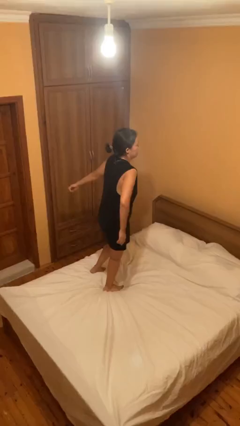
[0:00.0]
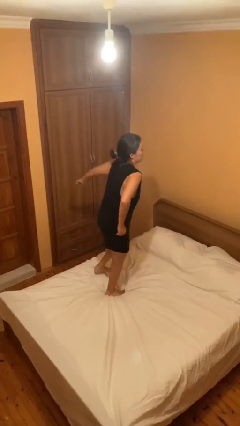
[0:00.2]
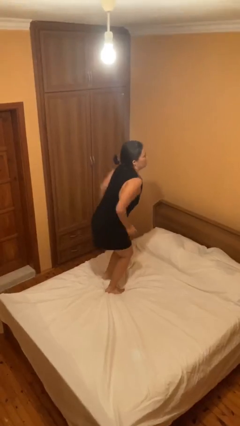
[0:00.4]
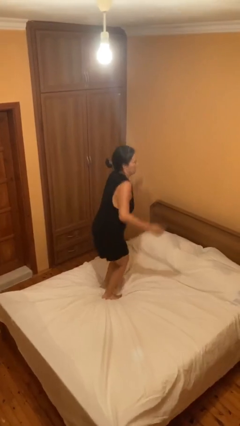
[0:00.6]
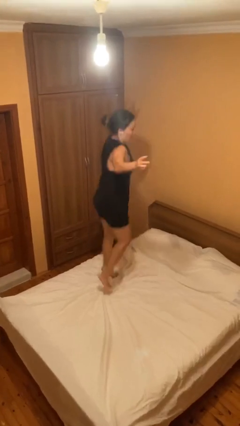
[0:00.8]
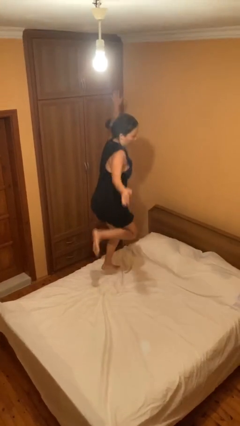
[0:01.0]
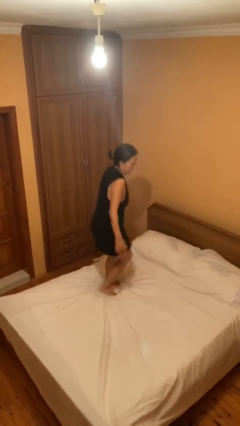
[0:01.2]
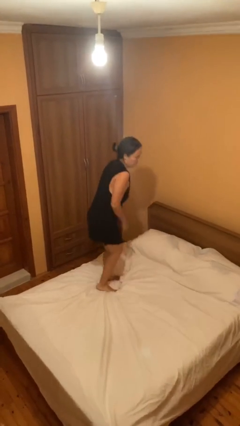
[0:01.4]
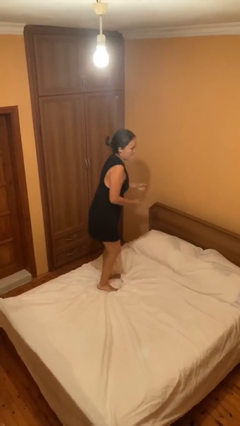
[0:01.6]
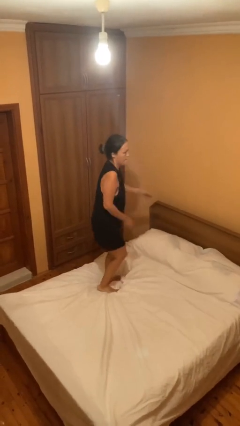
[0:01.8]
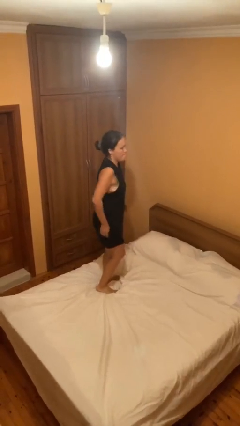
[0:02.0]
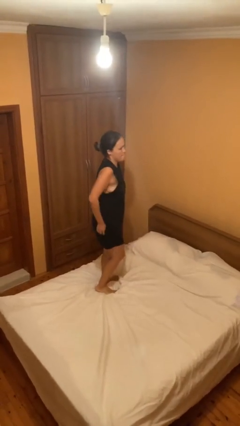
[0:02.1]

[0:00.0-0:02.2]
person jumps on bed

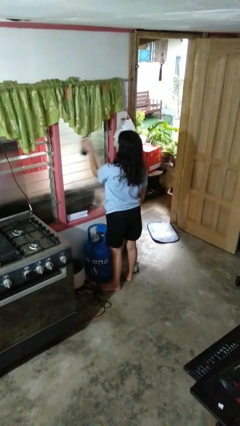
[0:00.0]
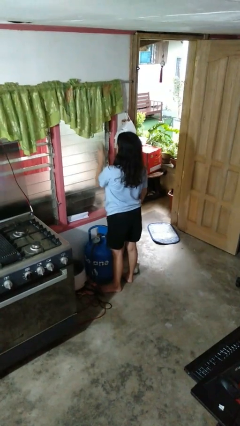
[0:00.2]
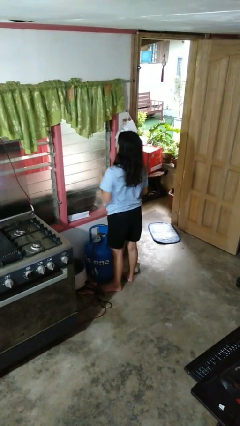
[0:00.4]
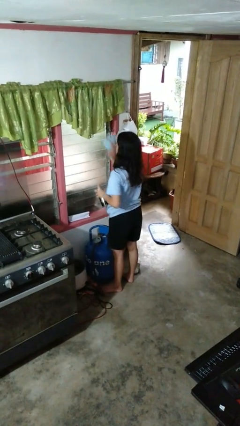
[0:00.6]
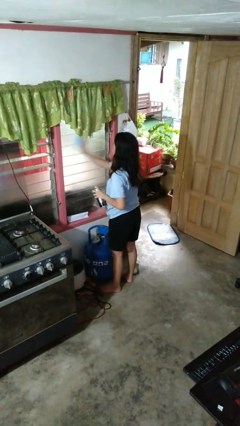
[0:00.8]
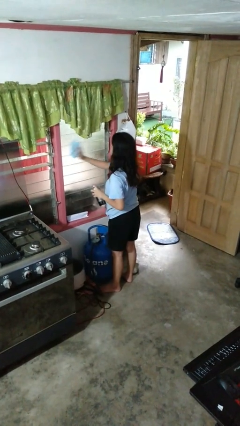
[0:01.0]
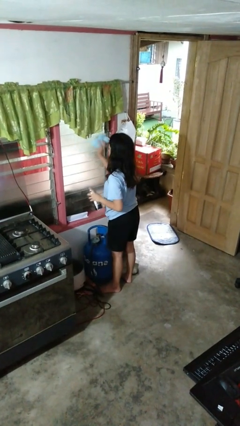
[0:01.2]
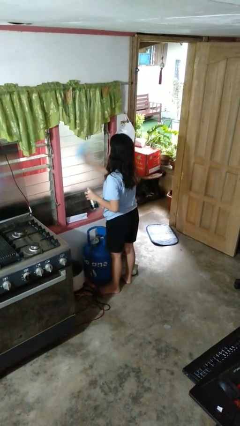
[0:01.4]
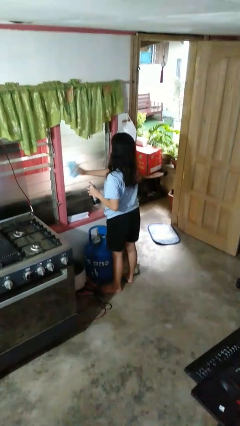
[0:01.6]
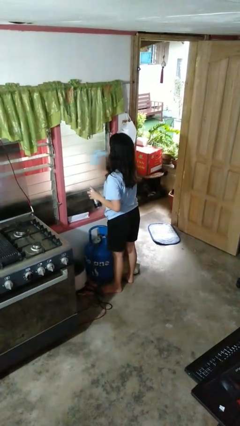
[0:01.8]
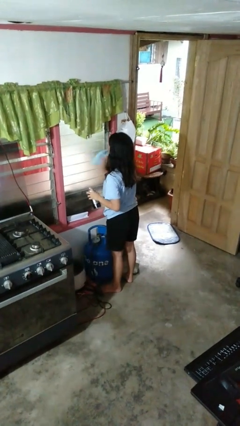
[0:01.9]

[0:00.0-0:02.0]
person washes window

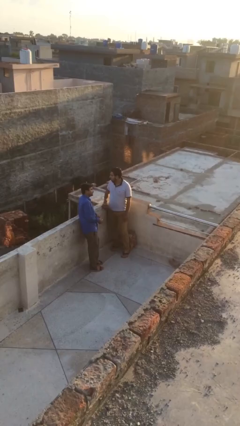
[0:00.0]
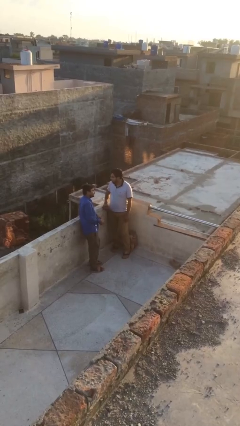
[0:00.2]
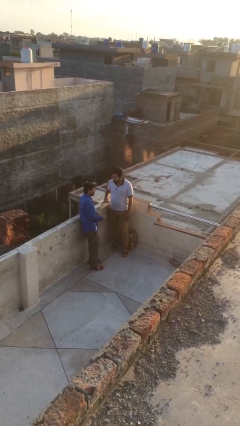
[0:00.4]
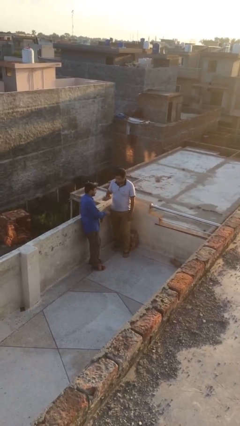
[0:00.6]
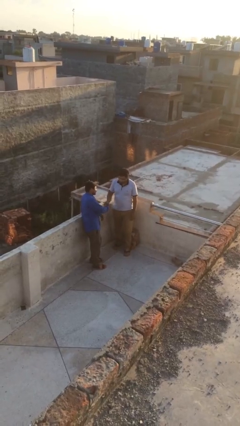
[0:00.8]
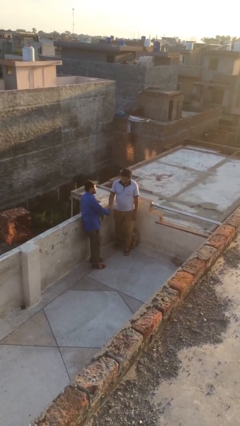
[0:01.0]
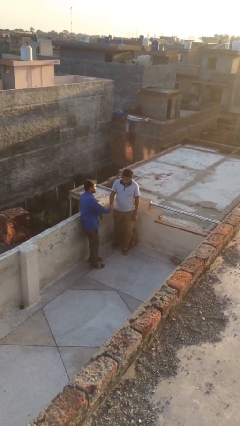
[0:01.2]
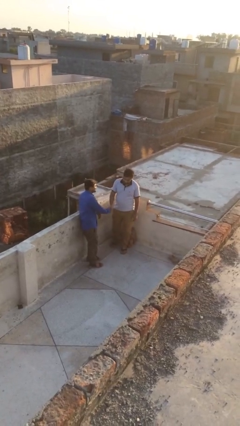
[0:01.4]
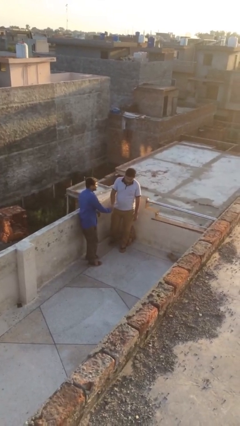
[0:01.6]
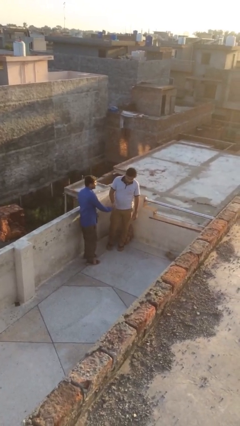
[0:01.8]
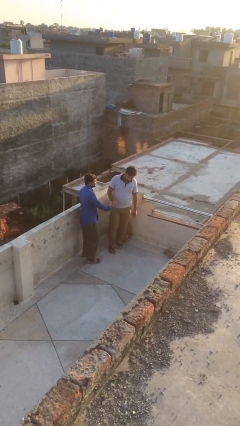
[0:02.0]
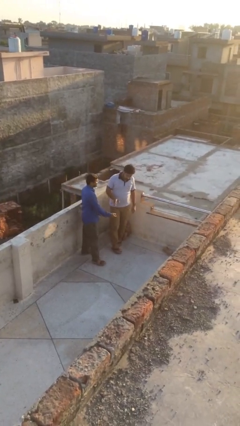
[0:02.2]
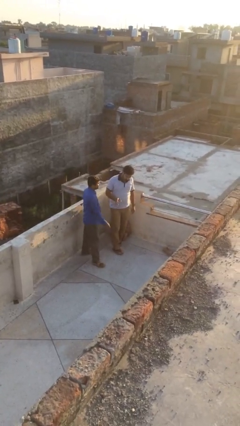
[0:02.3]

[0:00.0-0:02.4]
person shakes hand

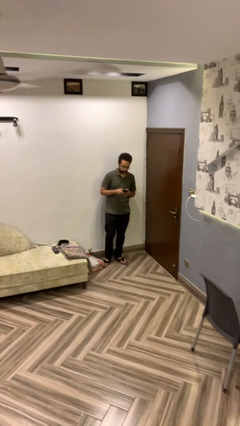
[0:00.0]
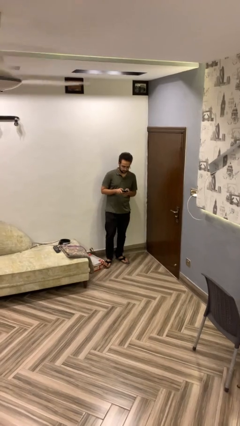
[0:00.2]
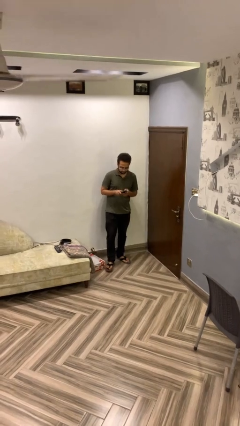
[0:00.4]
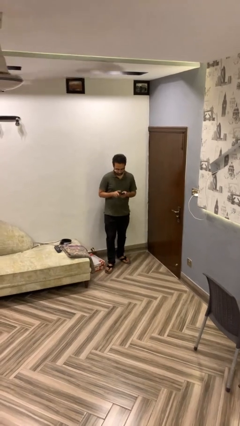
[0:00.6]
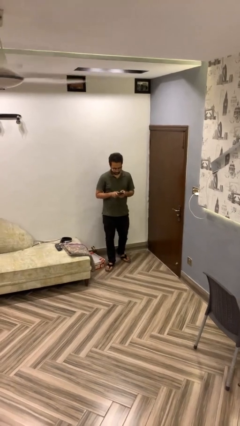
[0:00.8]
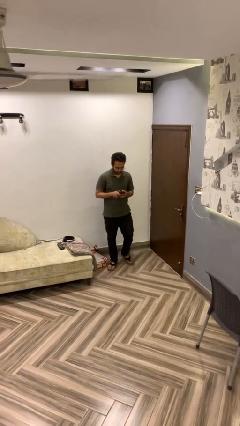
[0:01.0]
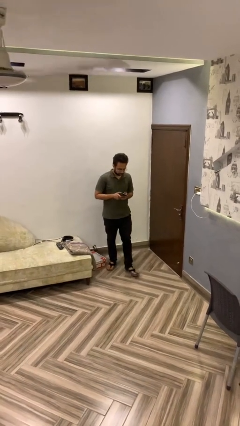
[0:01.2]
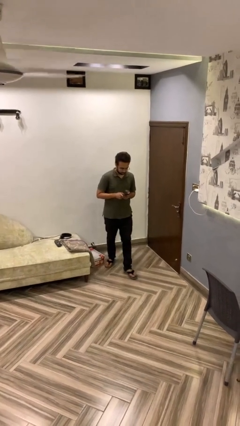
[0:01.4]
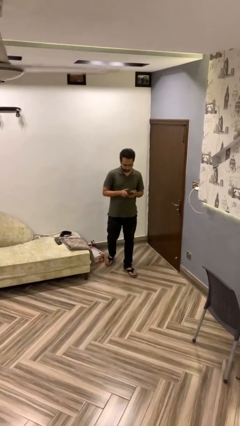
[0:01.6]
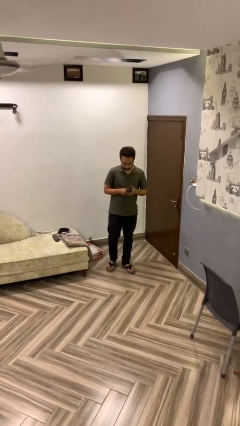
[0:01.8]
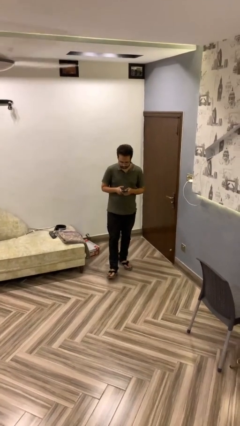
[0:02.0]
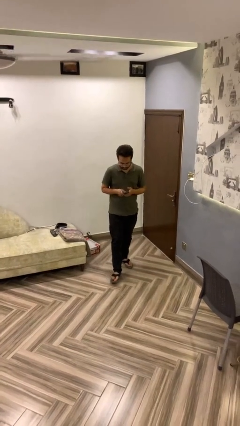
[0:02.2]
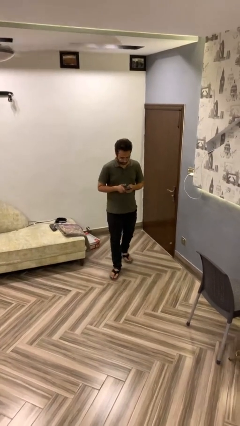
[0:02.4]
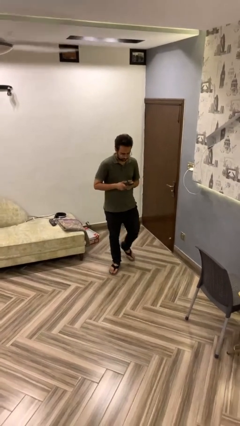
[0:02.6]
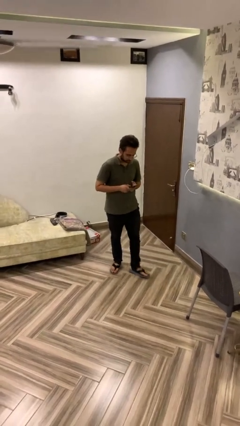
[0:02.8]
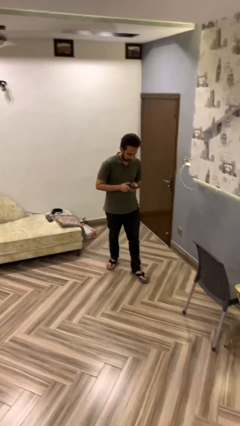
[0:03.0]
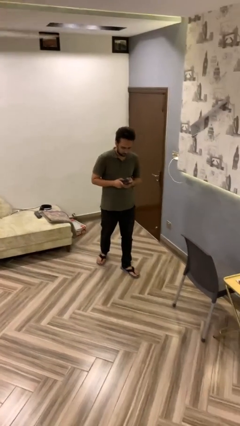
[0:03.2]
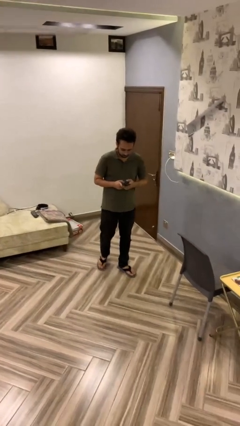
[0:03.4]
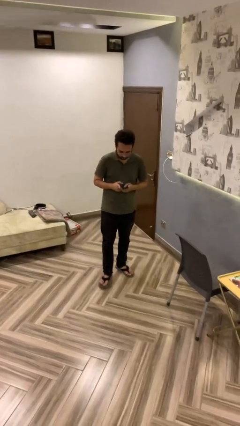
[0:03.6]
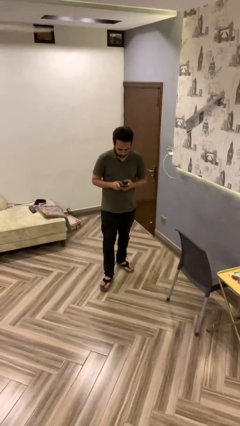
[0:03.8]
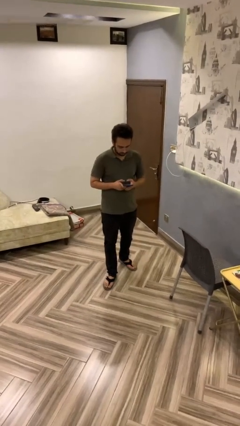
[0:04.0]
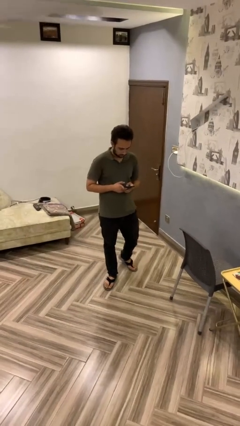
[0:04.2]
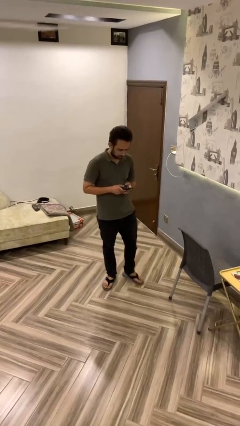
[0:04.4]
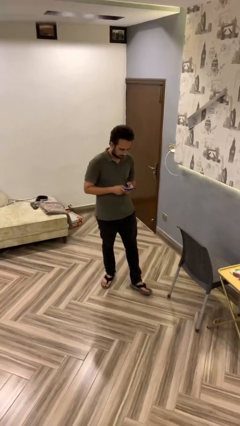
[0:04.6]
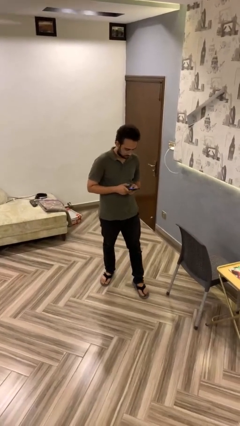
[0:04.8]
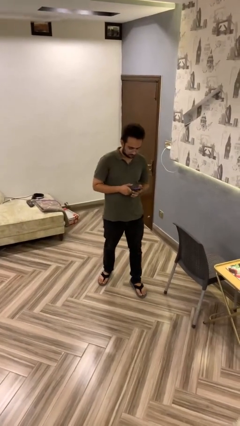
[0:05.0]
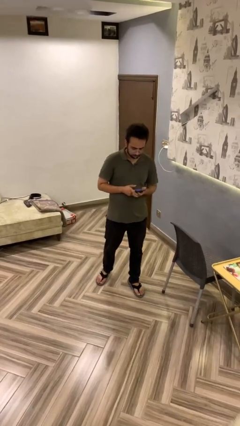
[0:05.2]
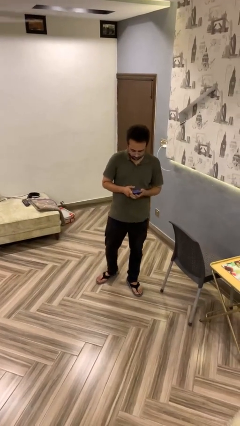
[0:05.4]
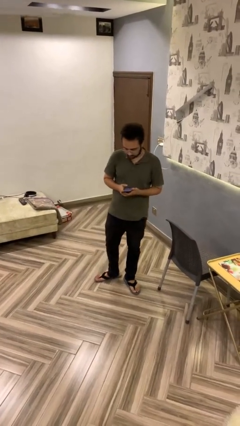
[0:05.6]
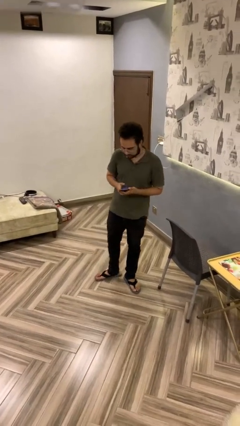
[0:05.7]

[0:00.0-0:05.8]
person texts on phone

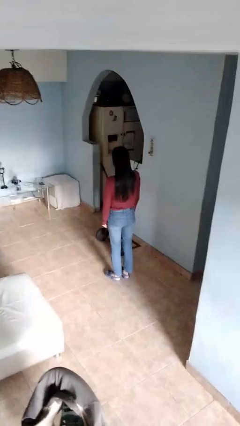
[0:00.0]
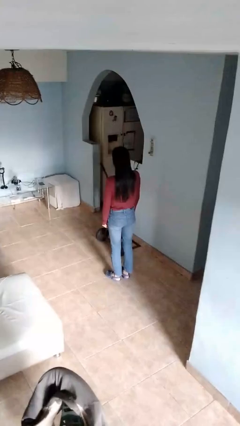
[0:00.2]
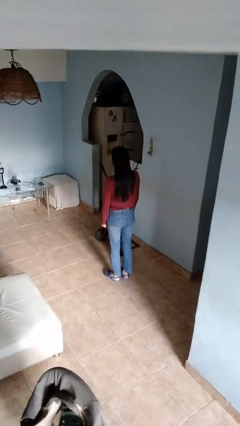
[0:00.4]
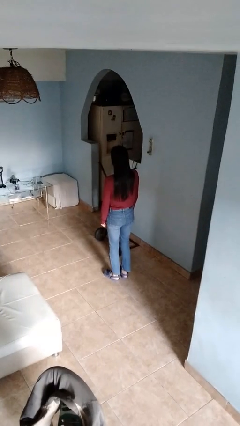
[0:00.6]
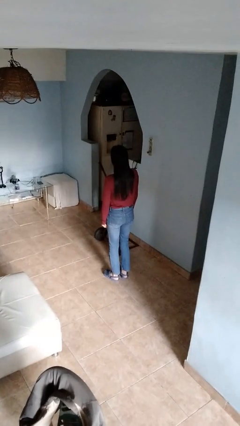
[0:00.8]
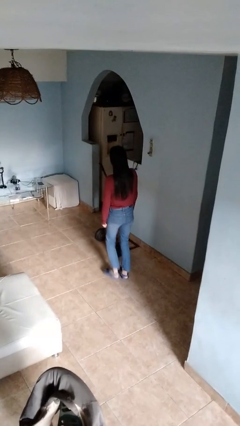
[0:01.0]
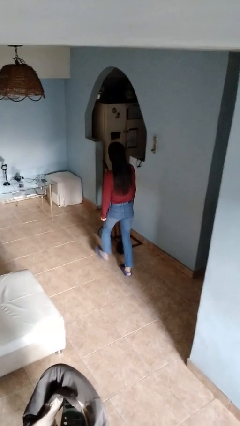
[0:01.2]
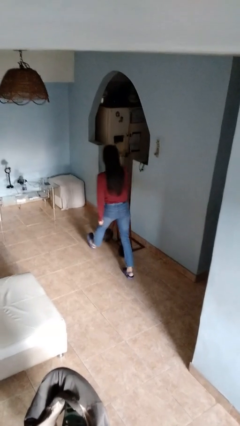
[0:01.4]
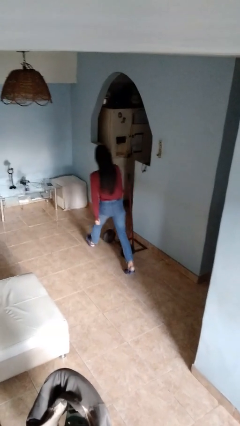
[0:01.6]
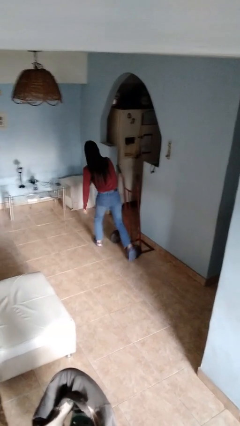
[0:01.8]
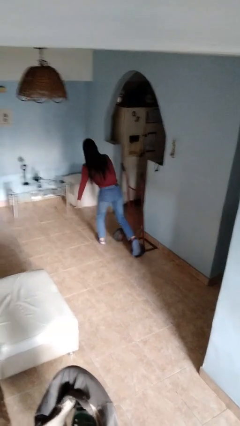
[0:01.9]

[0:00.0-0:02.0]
person trips on object on floor

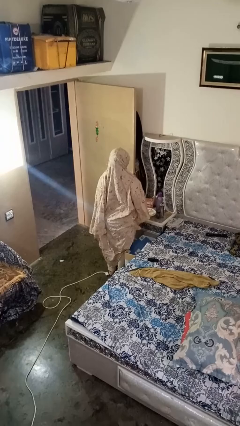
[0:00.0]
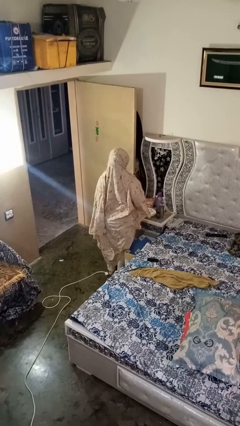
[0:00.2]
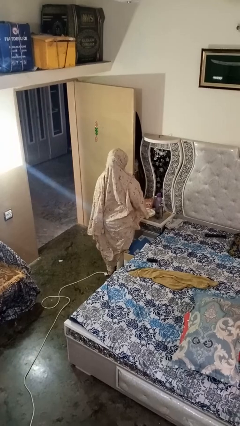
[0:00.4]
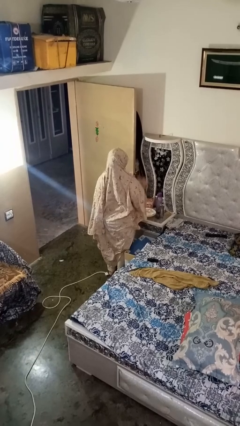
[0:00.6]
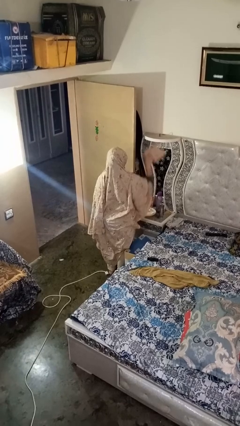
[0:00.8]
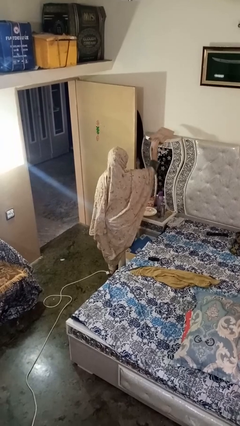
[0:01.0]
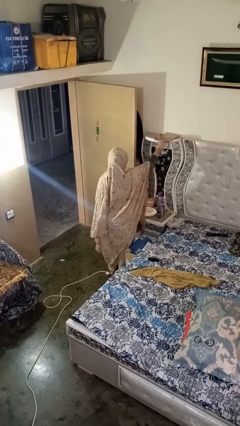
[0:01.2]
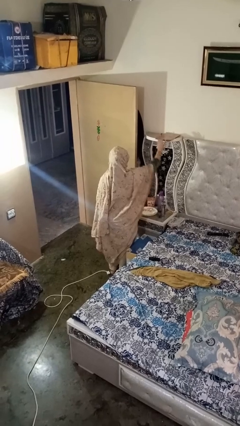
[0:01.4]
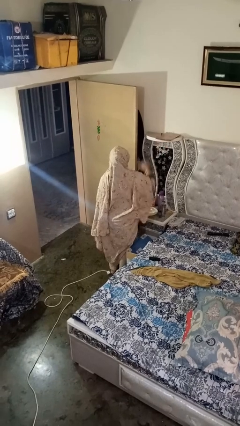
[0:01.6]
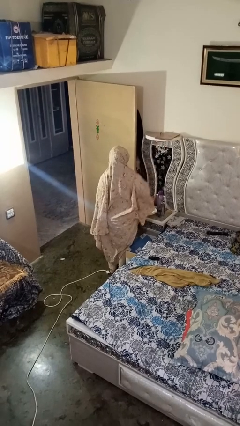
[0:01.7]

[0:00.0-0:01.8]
person puts down object on shelf

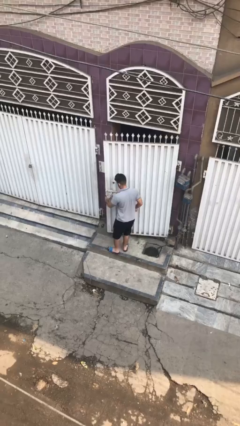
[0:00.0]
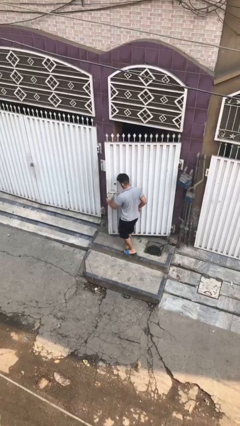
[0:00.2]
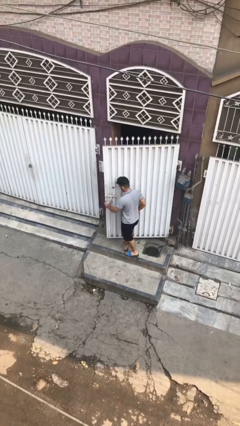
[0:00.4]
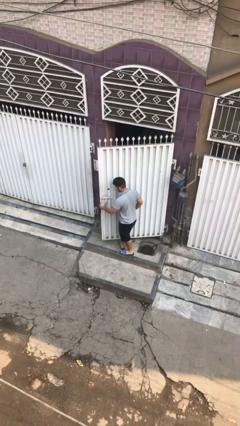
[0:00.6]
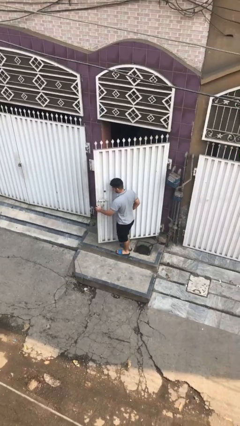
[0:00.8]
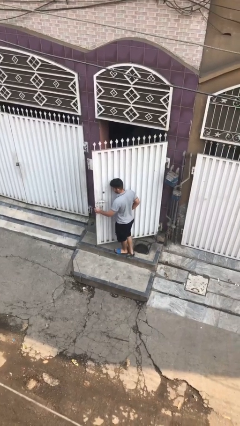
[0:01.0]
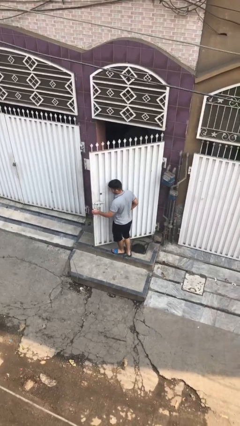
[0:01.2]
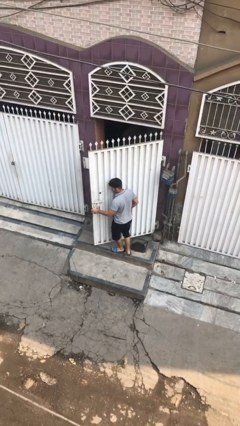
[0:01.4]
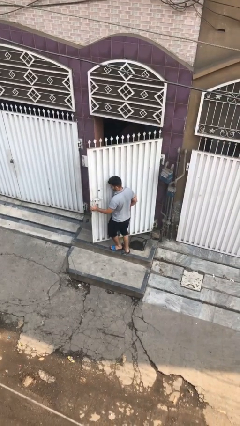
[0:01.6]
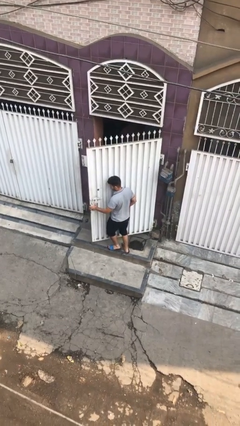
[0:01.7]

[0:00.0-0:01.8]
person opens facility door
